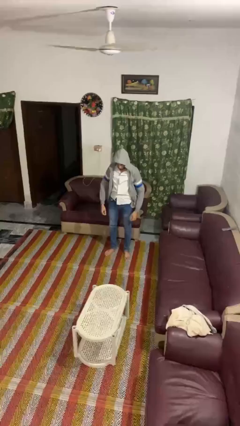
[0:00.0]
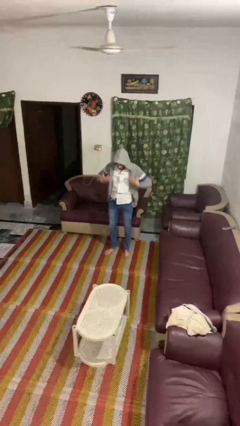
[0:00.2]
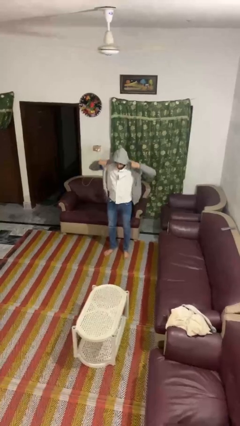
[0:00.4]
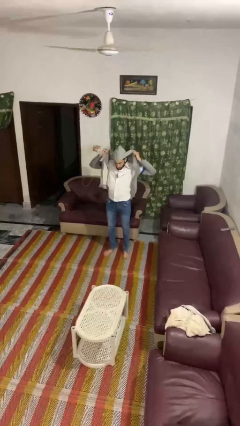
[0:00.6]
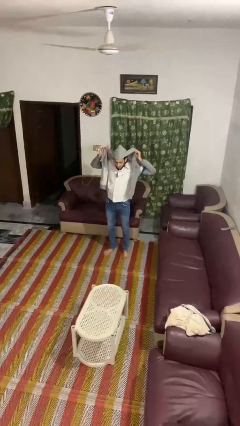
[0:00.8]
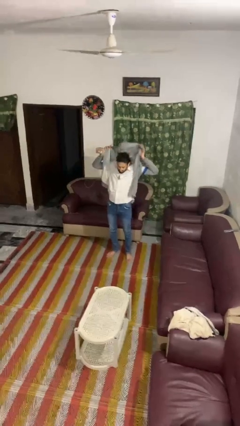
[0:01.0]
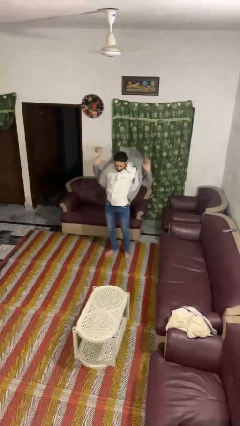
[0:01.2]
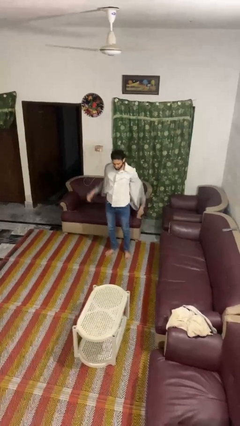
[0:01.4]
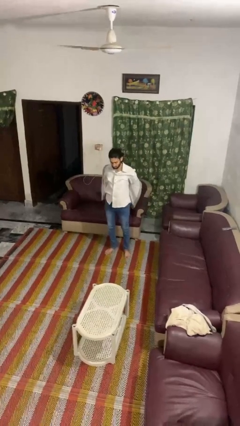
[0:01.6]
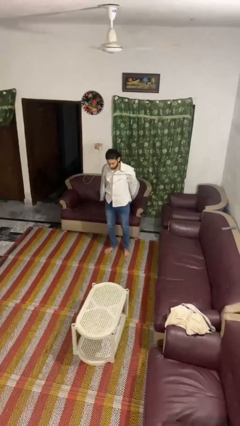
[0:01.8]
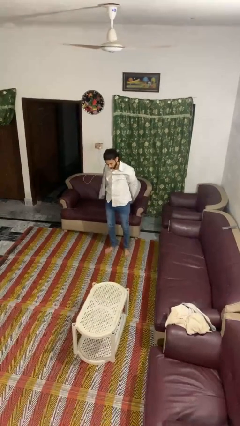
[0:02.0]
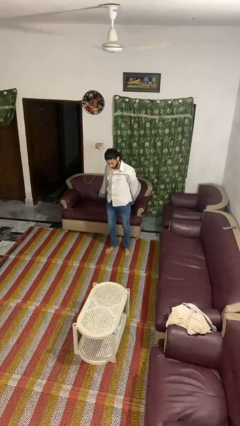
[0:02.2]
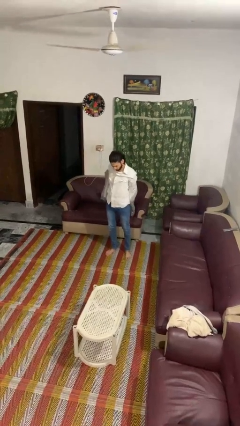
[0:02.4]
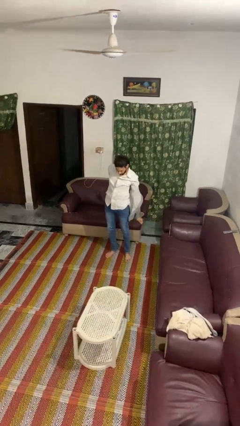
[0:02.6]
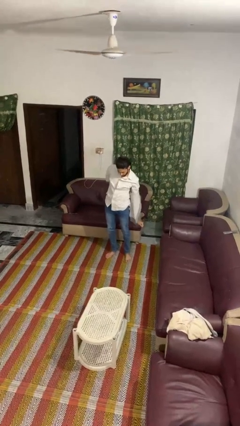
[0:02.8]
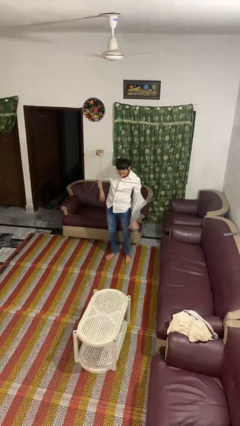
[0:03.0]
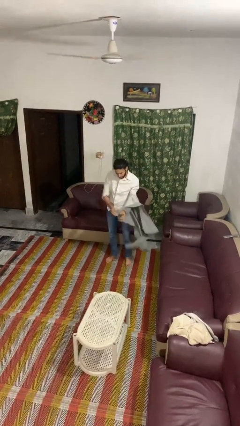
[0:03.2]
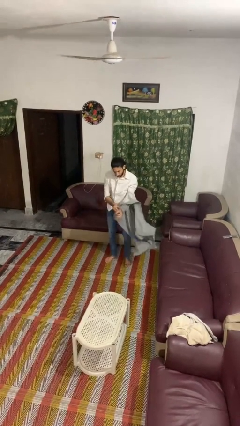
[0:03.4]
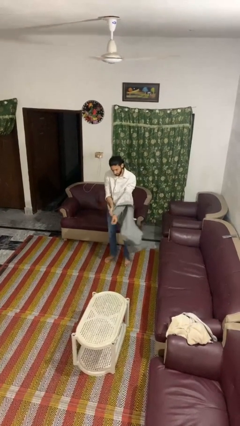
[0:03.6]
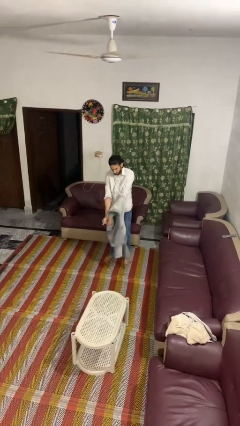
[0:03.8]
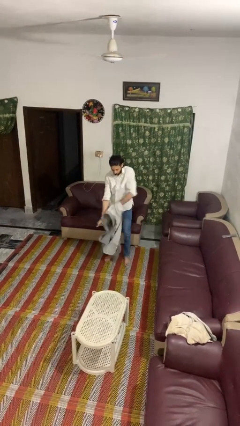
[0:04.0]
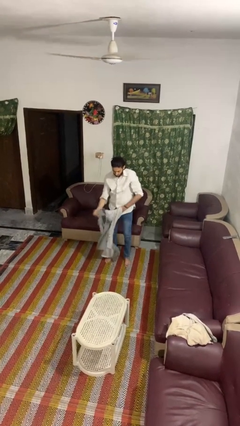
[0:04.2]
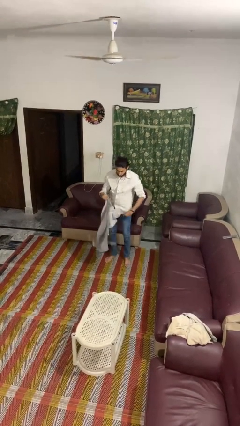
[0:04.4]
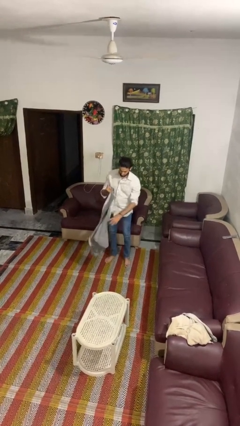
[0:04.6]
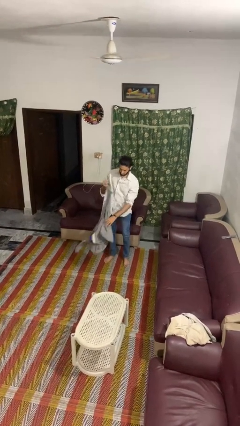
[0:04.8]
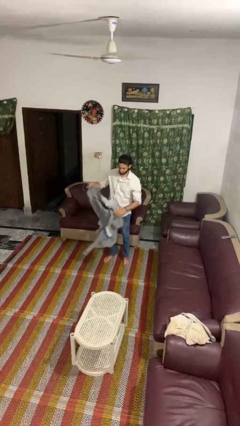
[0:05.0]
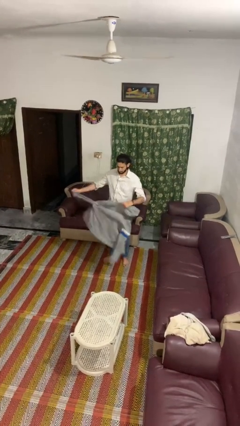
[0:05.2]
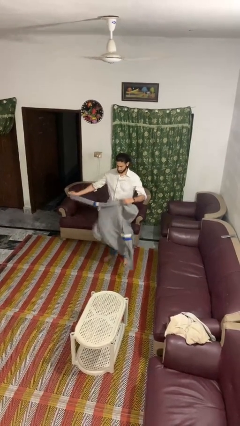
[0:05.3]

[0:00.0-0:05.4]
person takes off hoodie

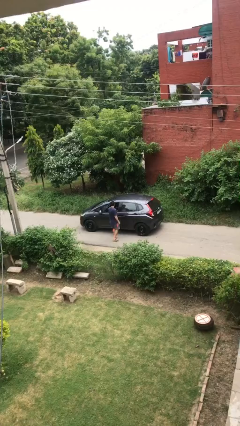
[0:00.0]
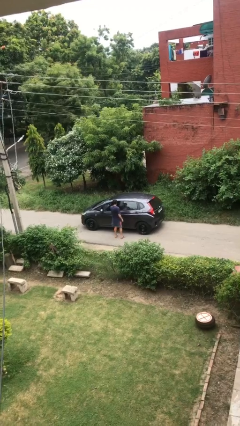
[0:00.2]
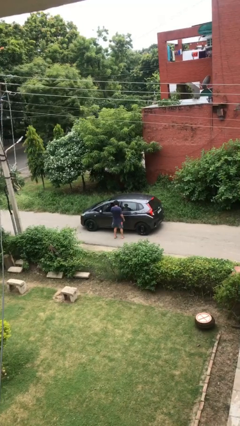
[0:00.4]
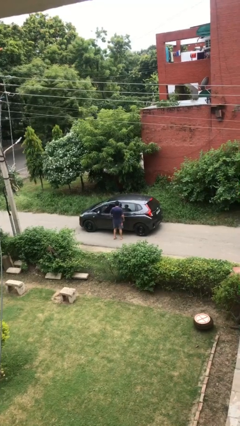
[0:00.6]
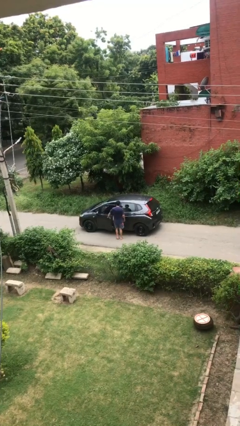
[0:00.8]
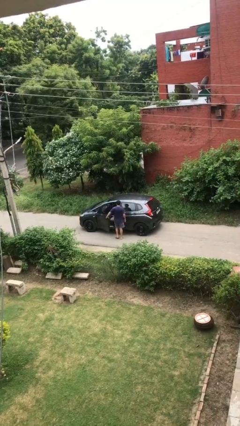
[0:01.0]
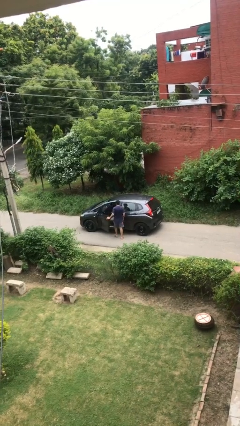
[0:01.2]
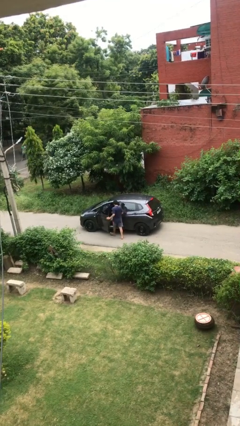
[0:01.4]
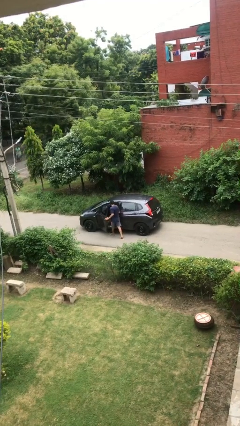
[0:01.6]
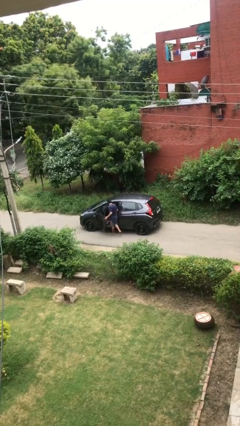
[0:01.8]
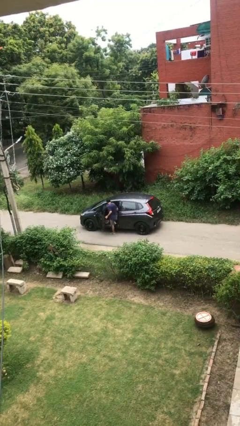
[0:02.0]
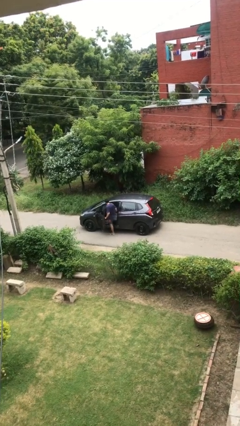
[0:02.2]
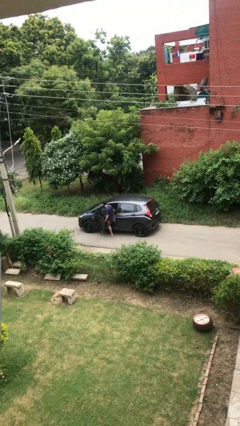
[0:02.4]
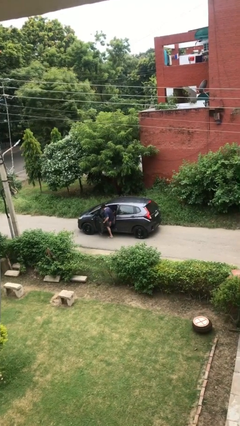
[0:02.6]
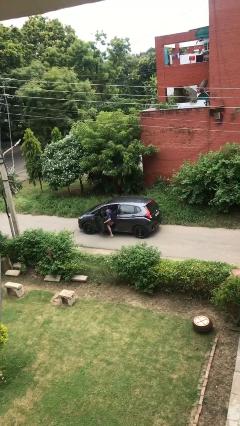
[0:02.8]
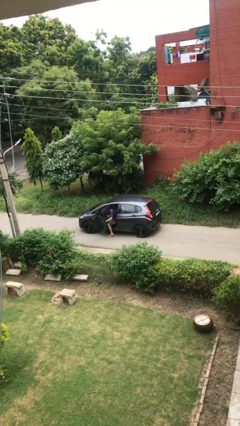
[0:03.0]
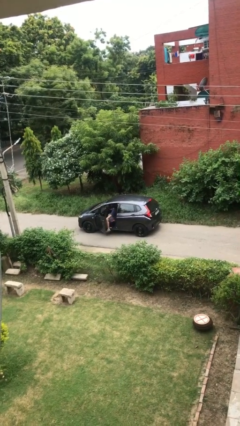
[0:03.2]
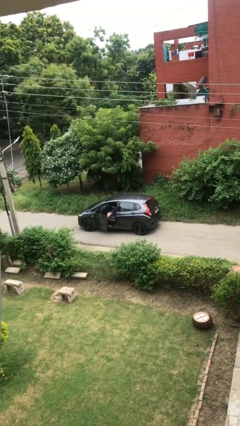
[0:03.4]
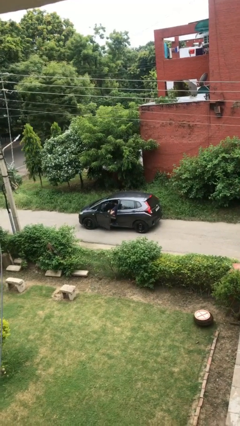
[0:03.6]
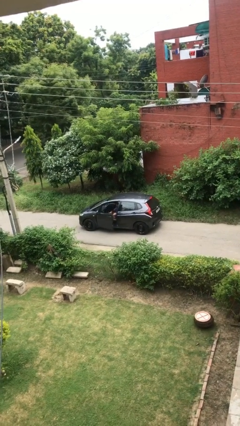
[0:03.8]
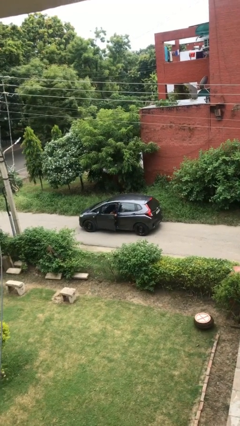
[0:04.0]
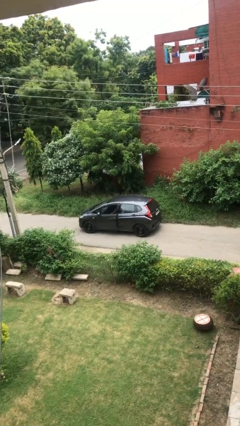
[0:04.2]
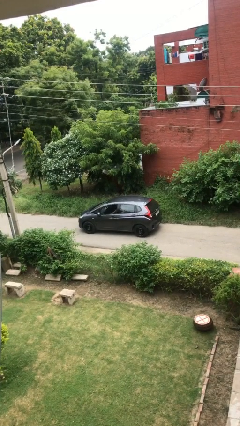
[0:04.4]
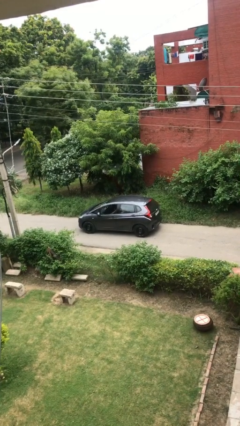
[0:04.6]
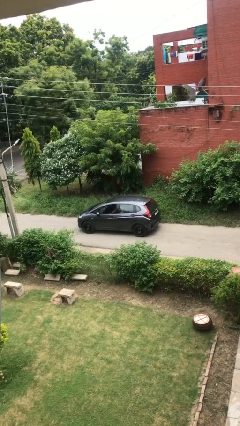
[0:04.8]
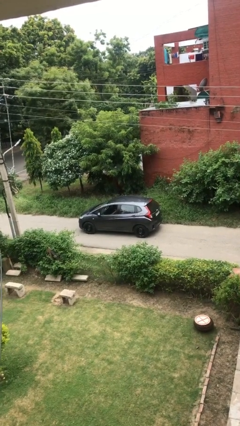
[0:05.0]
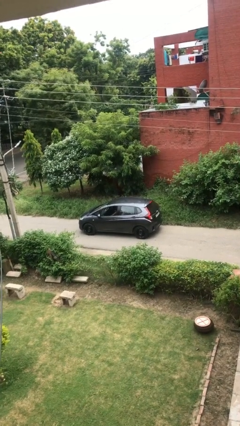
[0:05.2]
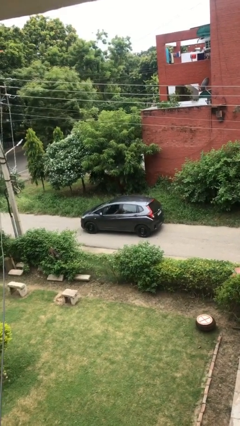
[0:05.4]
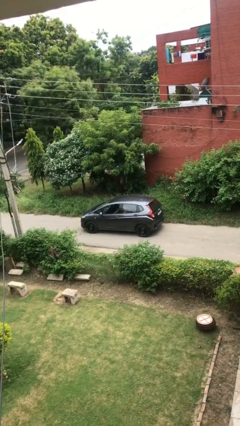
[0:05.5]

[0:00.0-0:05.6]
car picks up person

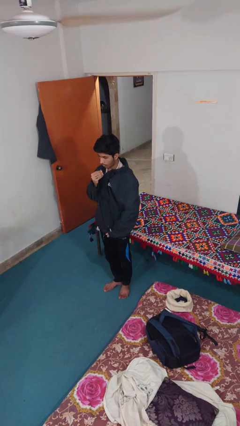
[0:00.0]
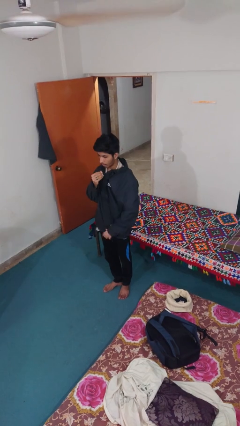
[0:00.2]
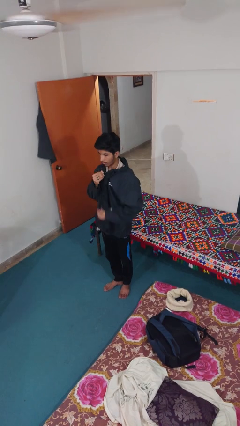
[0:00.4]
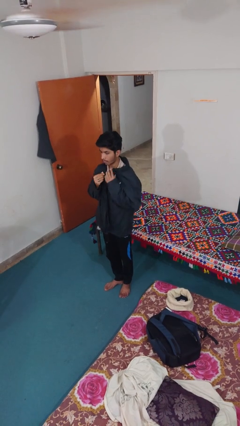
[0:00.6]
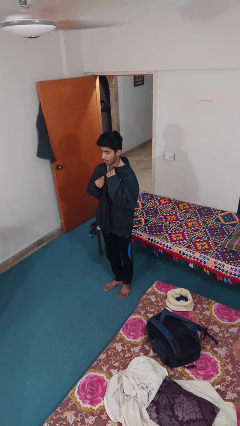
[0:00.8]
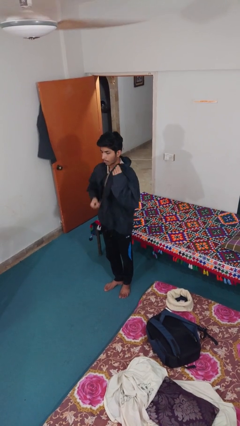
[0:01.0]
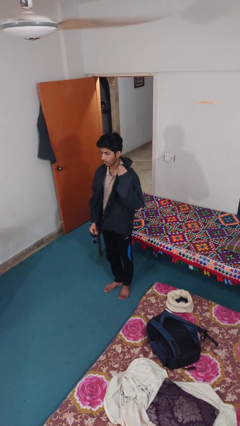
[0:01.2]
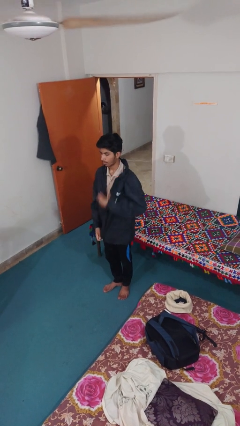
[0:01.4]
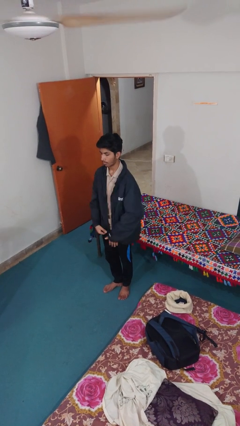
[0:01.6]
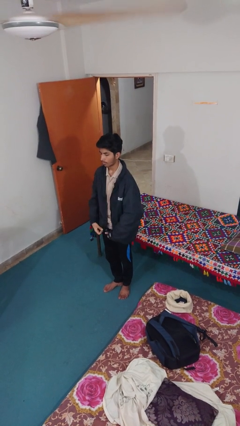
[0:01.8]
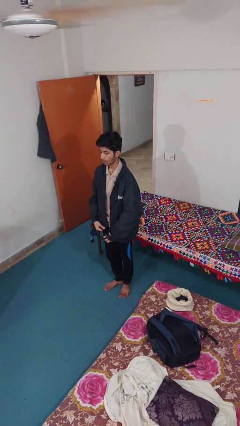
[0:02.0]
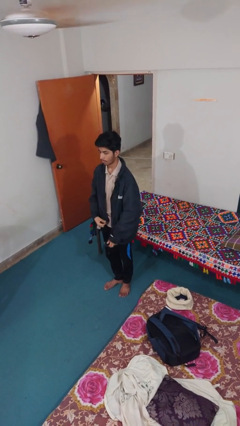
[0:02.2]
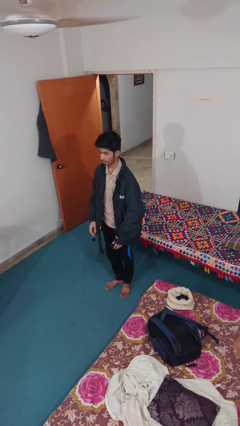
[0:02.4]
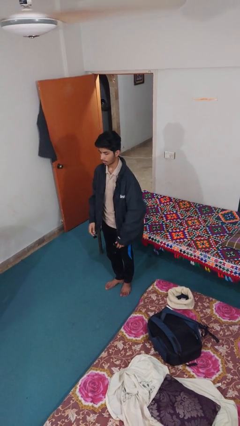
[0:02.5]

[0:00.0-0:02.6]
person unzips jacket

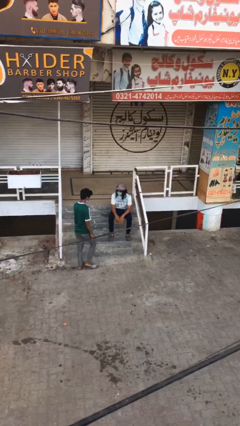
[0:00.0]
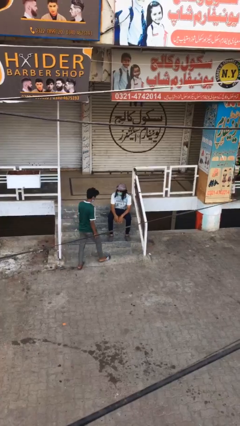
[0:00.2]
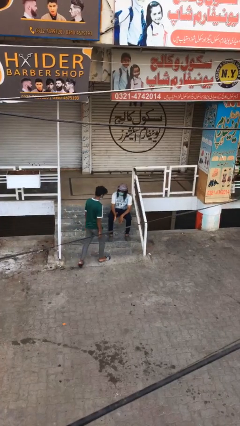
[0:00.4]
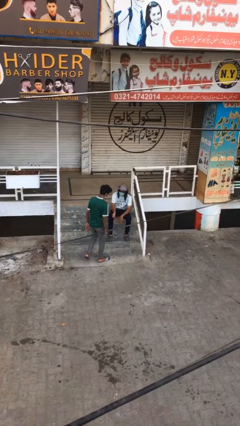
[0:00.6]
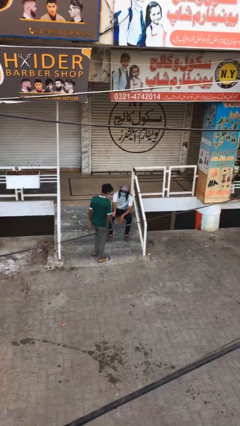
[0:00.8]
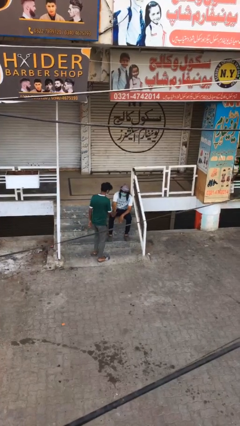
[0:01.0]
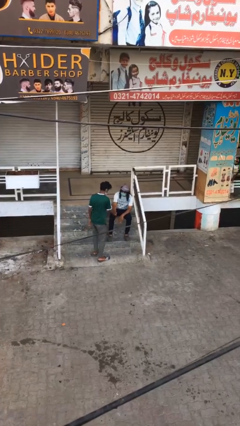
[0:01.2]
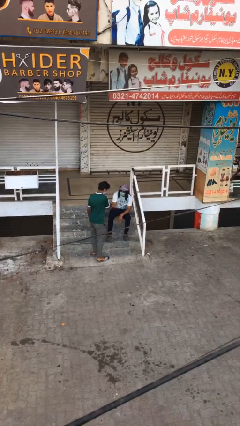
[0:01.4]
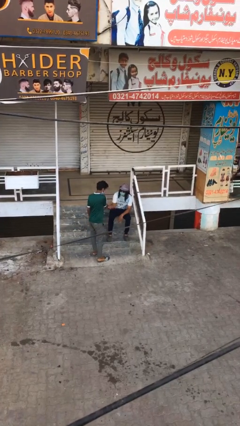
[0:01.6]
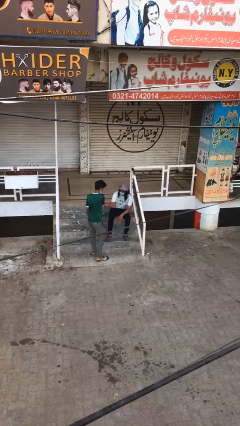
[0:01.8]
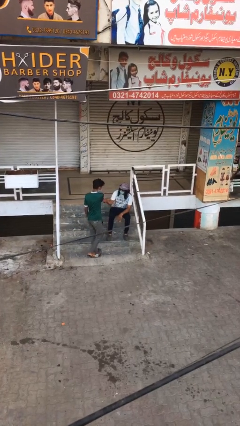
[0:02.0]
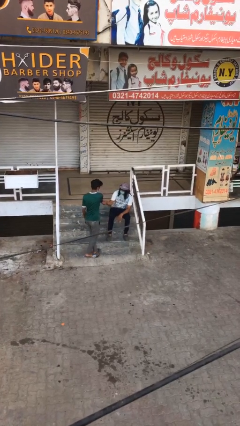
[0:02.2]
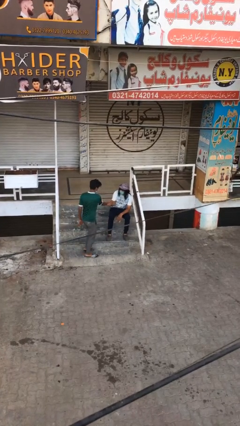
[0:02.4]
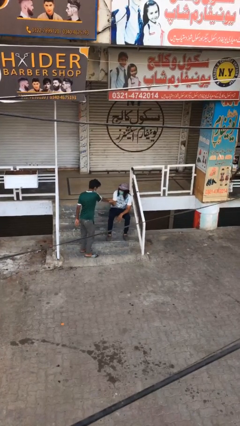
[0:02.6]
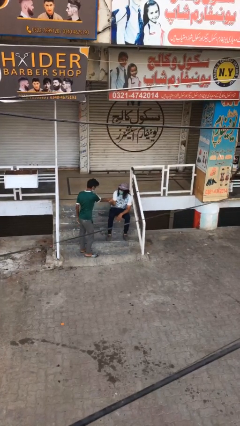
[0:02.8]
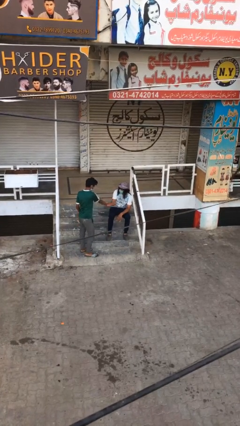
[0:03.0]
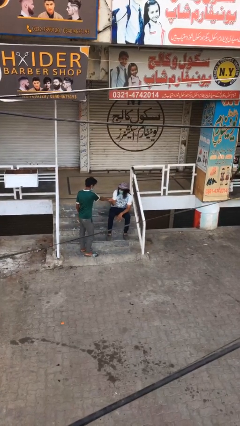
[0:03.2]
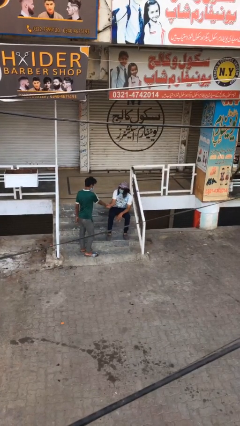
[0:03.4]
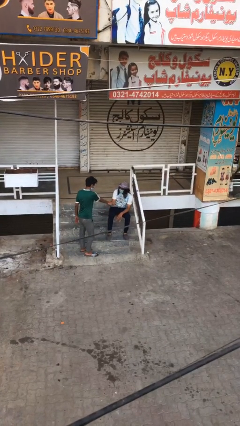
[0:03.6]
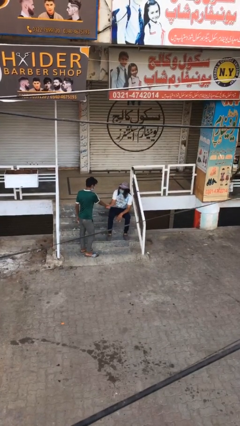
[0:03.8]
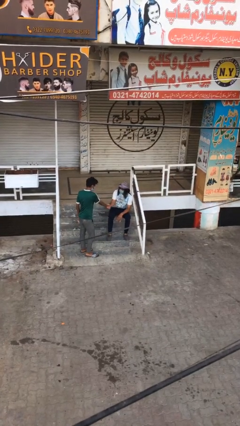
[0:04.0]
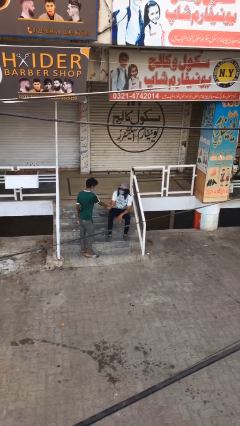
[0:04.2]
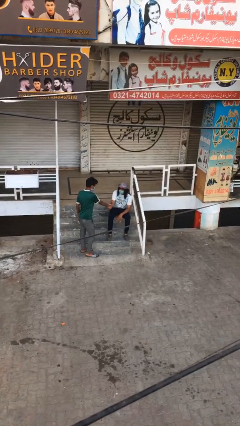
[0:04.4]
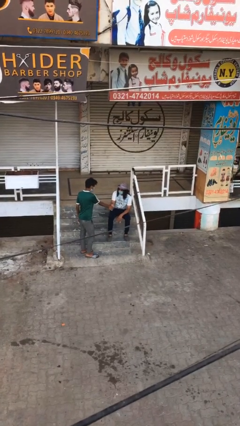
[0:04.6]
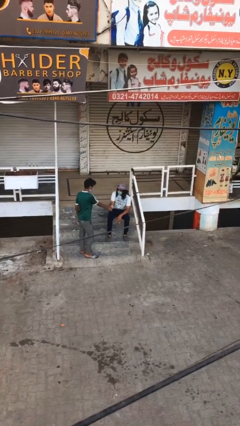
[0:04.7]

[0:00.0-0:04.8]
person shakes hand
